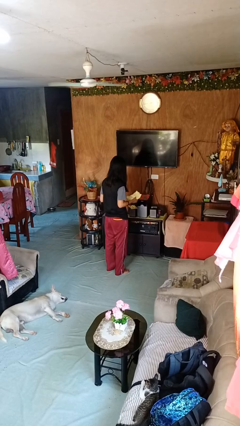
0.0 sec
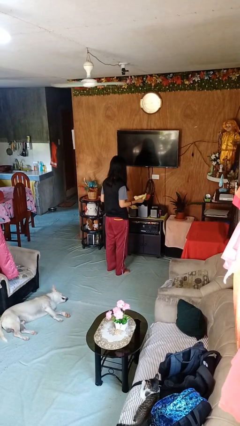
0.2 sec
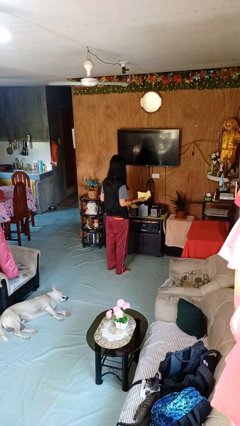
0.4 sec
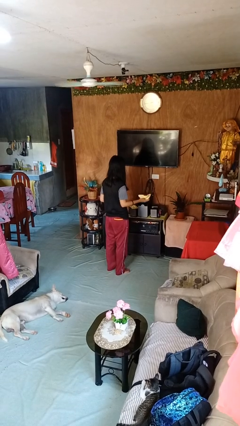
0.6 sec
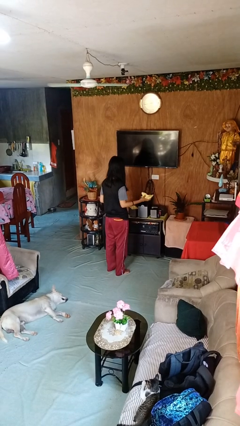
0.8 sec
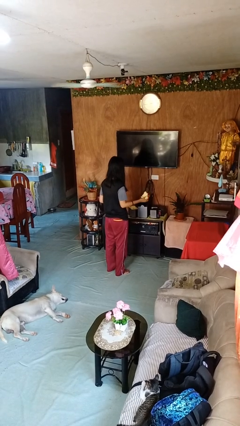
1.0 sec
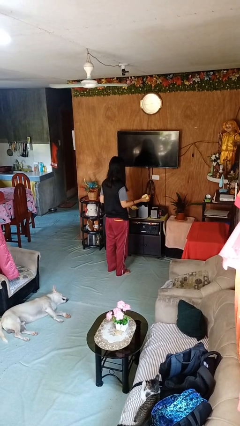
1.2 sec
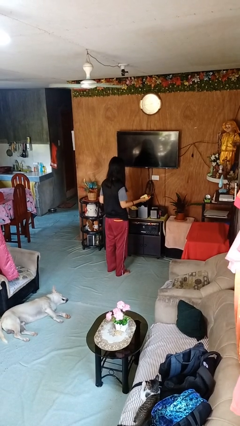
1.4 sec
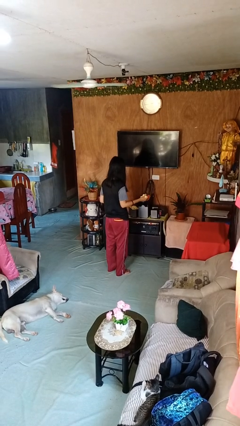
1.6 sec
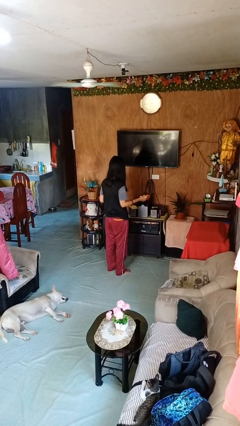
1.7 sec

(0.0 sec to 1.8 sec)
person crumples paper

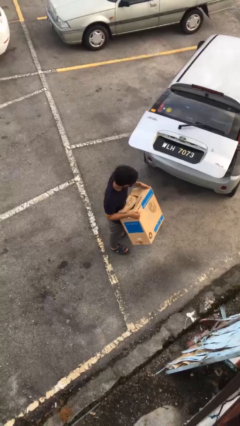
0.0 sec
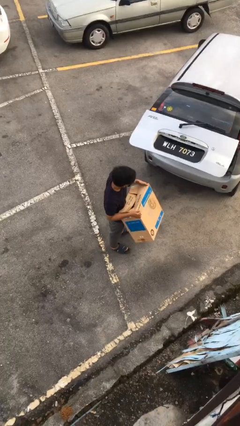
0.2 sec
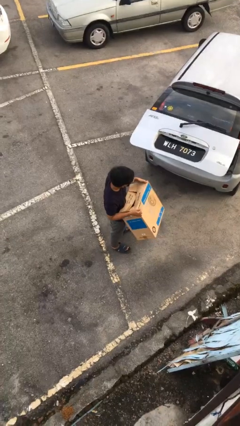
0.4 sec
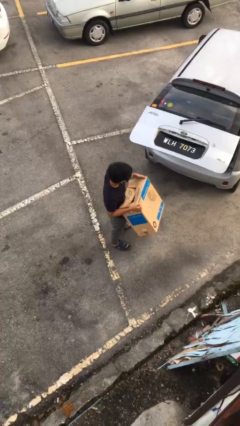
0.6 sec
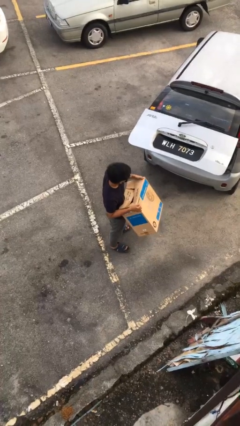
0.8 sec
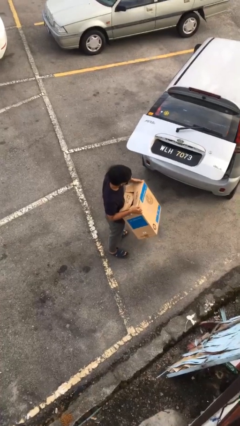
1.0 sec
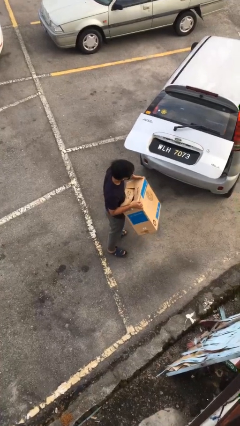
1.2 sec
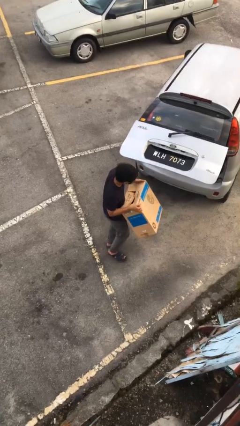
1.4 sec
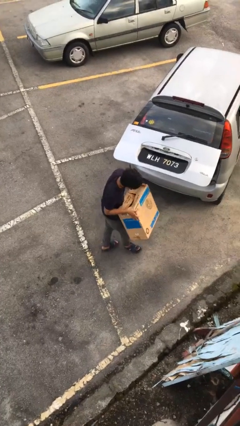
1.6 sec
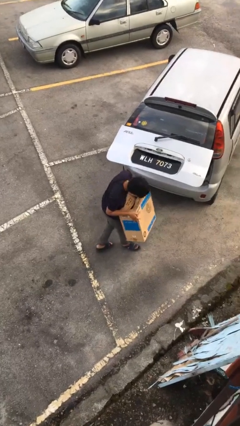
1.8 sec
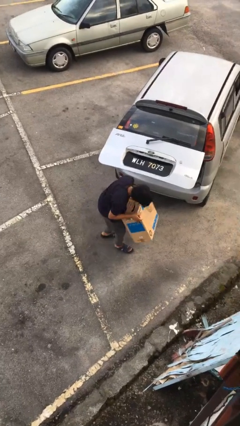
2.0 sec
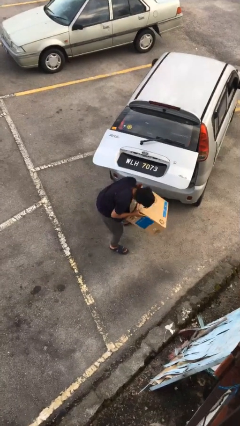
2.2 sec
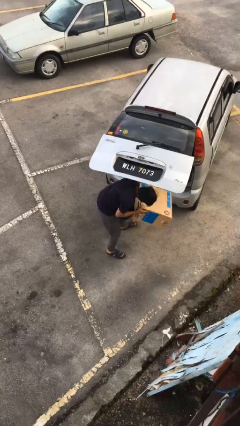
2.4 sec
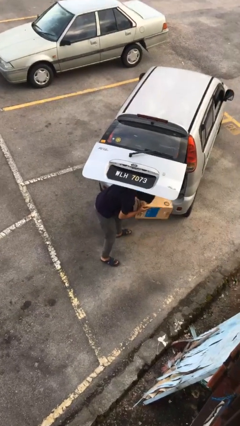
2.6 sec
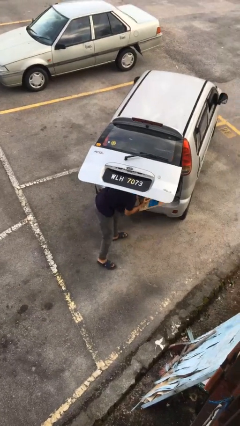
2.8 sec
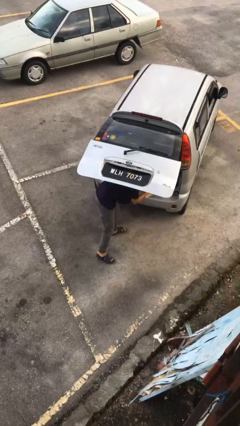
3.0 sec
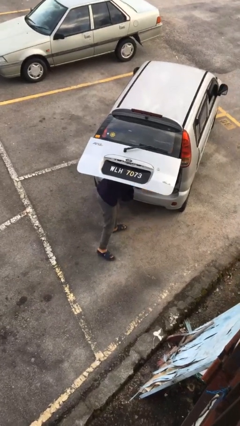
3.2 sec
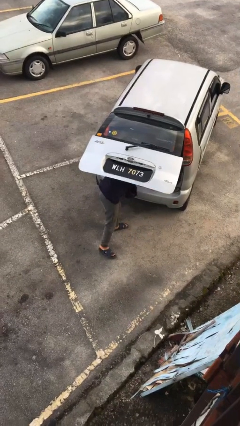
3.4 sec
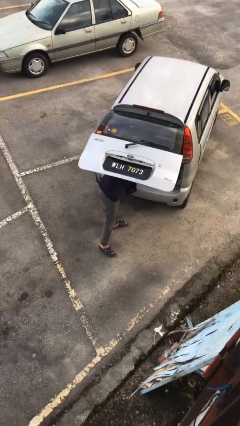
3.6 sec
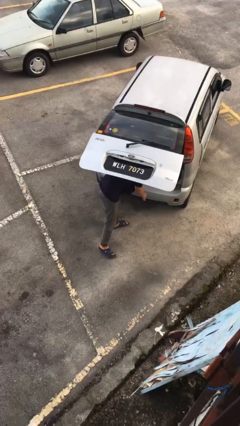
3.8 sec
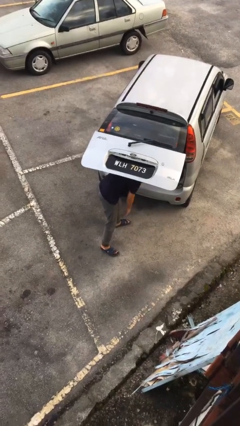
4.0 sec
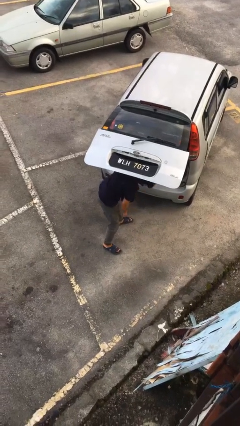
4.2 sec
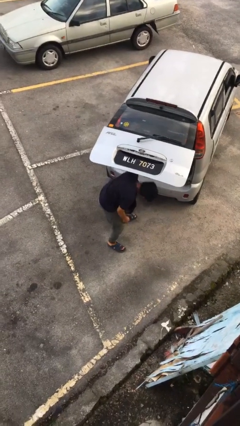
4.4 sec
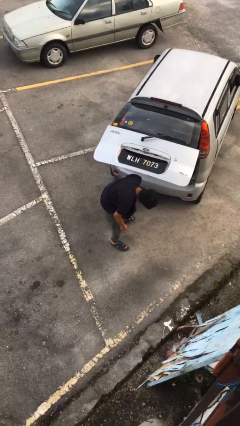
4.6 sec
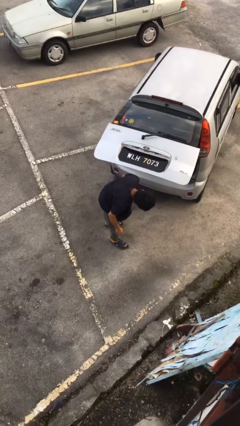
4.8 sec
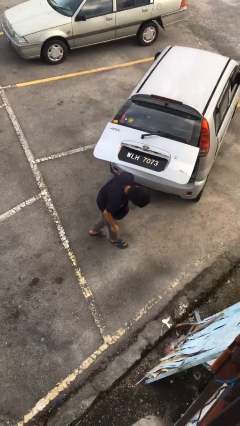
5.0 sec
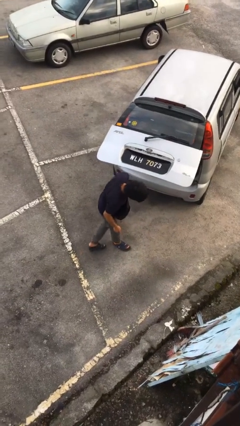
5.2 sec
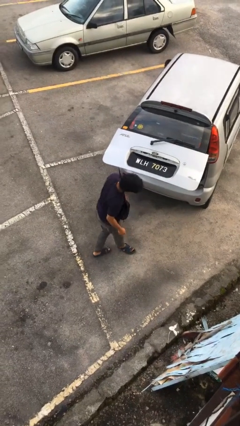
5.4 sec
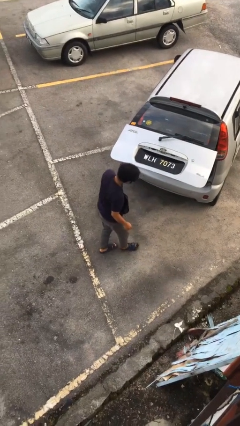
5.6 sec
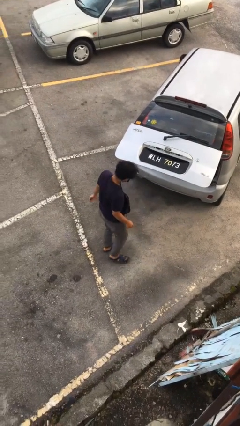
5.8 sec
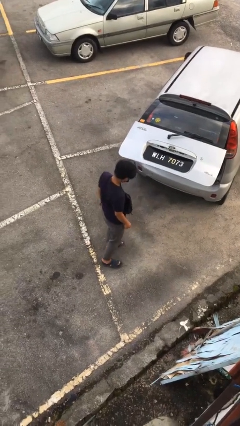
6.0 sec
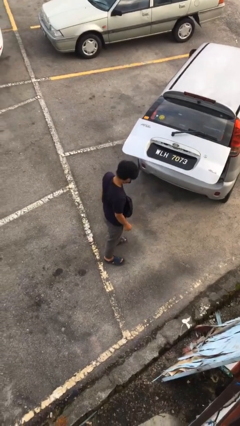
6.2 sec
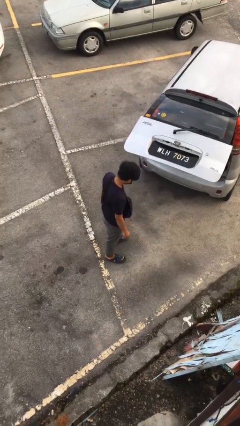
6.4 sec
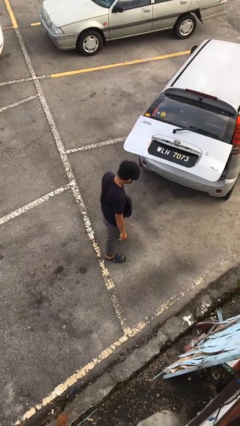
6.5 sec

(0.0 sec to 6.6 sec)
person loads car

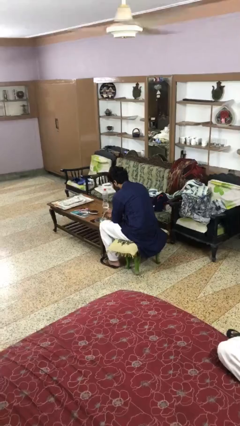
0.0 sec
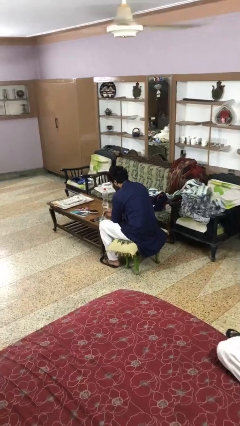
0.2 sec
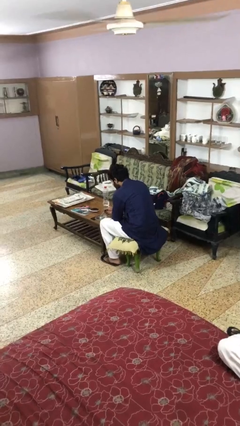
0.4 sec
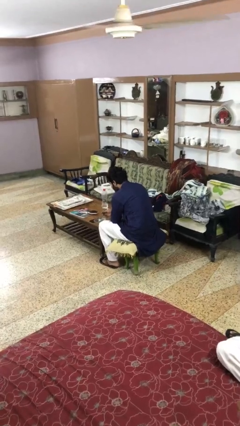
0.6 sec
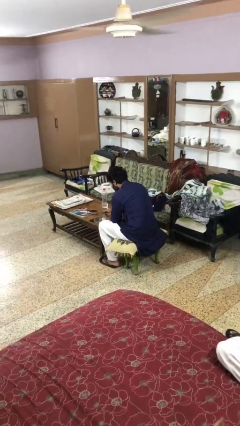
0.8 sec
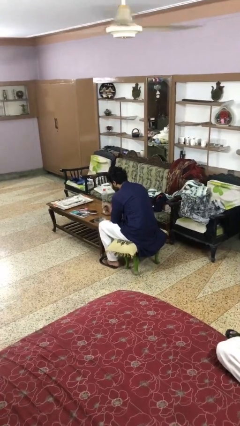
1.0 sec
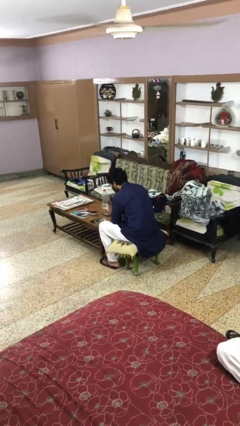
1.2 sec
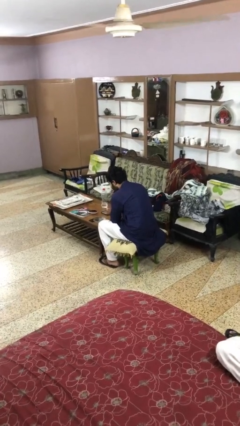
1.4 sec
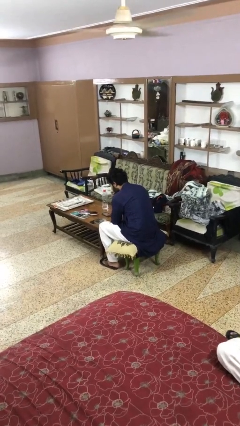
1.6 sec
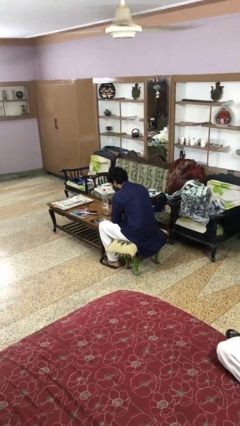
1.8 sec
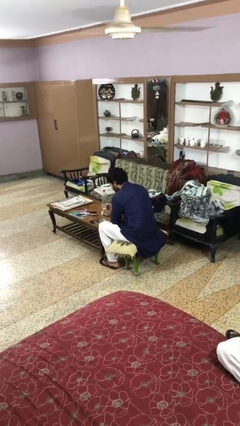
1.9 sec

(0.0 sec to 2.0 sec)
person eats with utensil

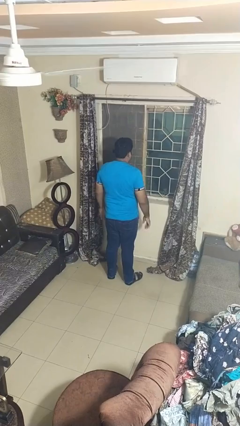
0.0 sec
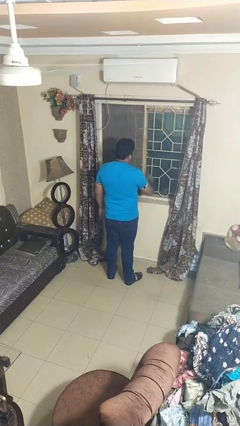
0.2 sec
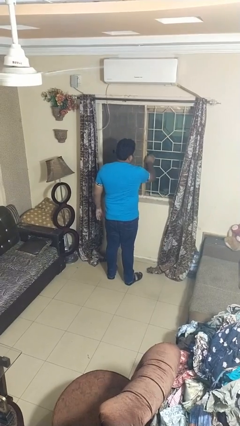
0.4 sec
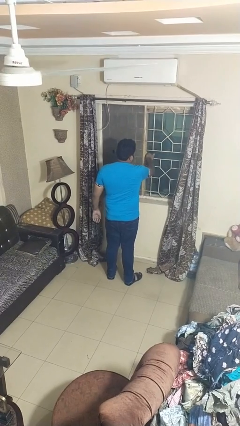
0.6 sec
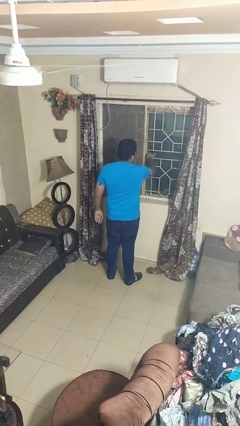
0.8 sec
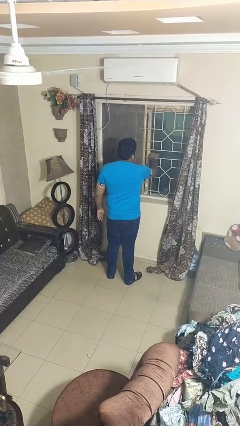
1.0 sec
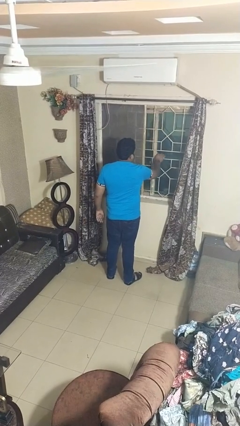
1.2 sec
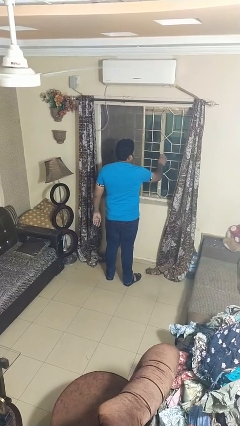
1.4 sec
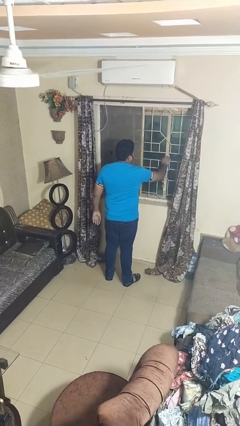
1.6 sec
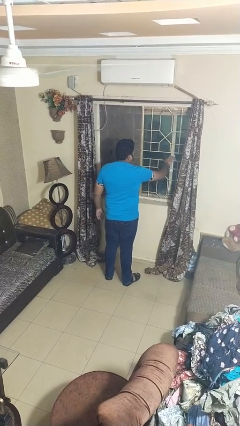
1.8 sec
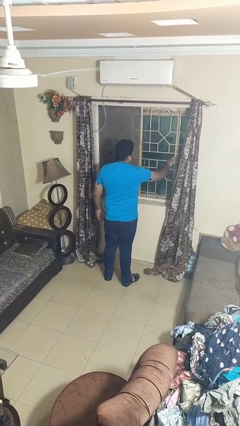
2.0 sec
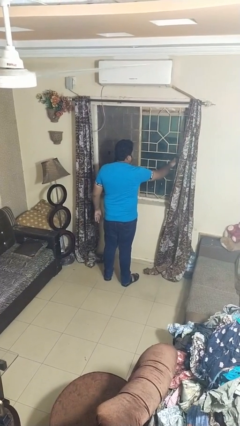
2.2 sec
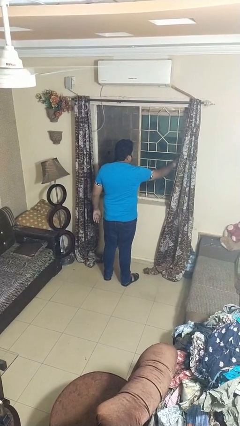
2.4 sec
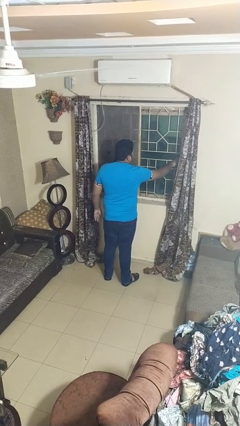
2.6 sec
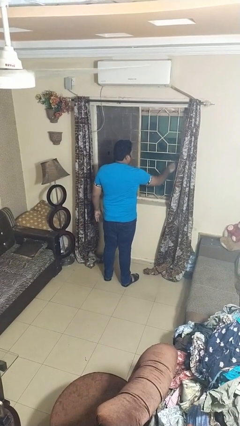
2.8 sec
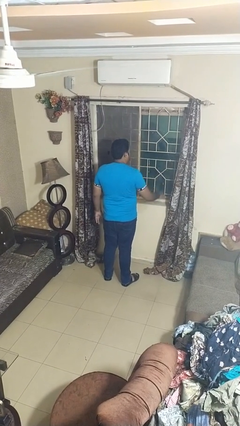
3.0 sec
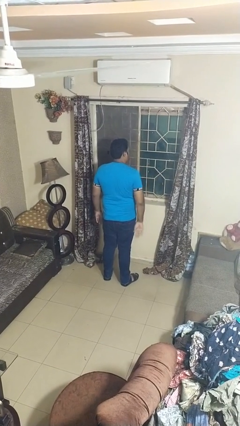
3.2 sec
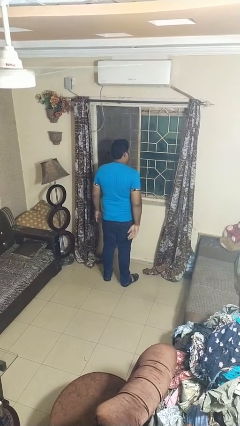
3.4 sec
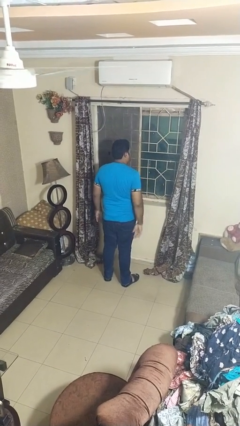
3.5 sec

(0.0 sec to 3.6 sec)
person opens home window

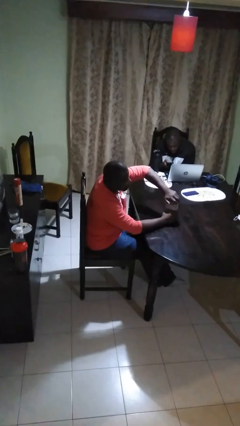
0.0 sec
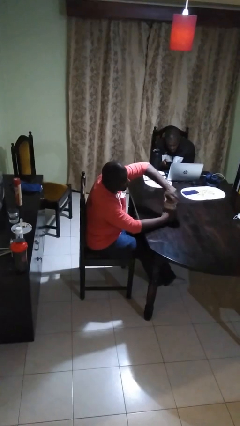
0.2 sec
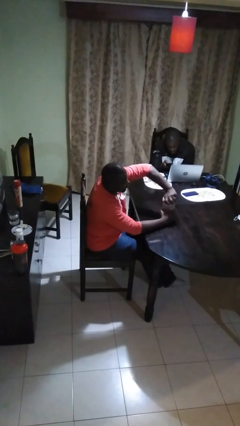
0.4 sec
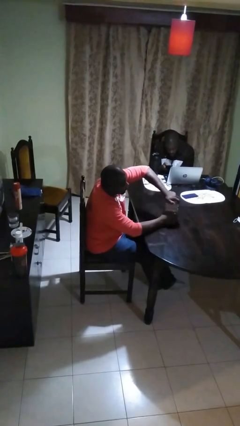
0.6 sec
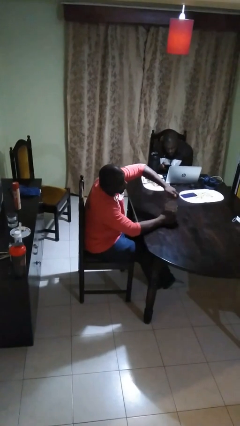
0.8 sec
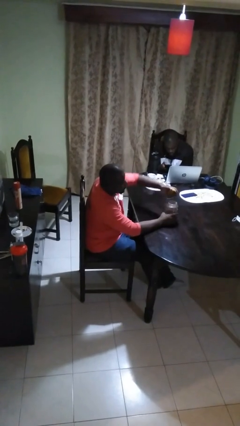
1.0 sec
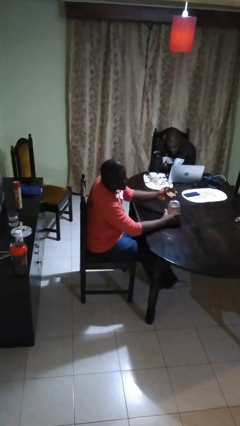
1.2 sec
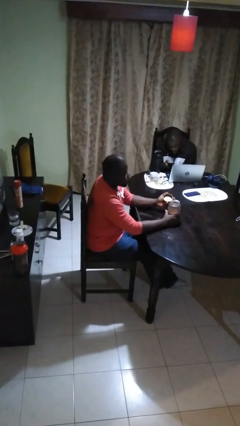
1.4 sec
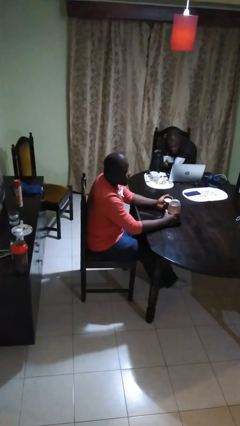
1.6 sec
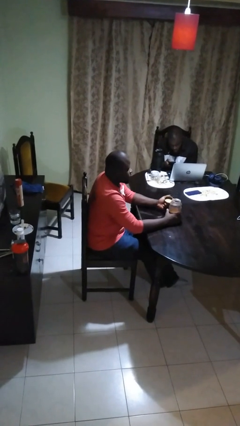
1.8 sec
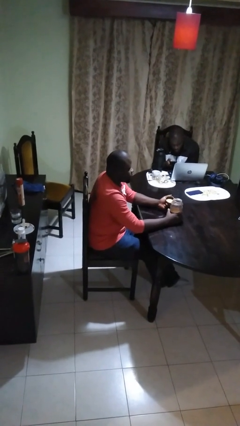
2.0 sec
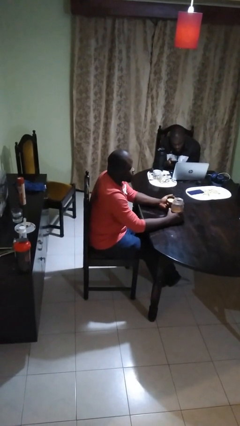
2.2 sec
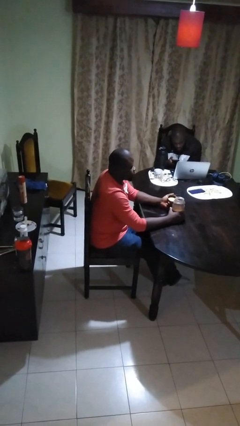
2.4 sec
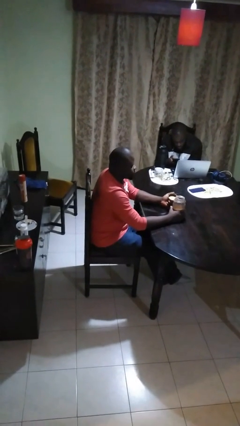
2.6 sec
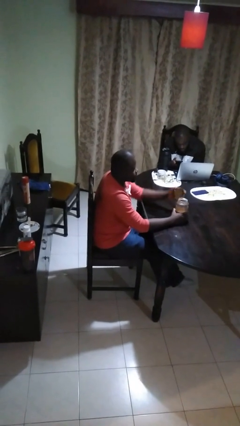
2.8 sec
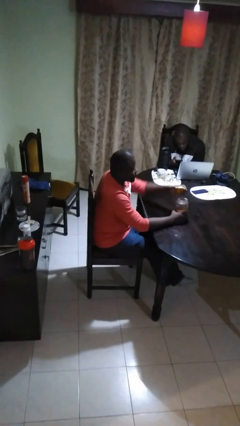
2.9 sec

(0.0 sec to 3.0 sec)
person opens jar

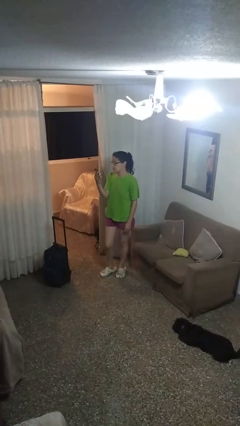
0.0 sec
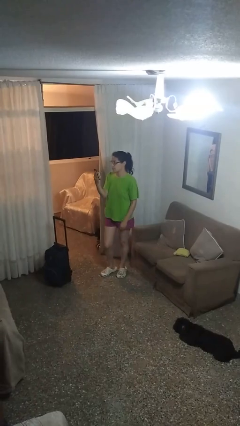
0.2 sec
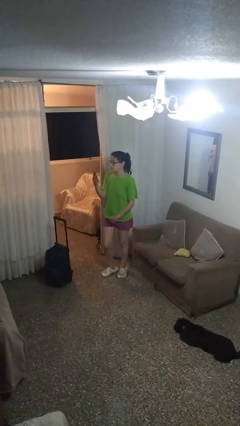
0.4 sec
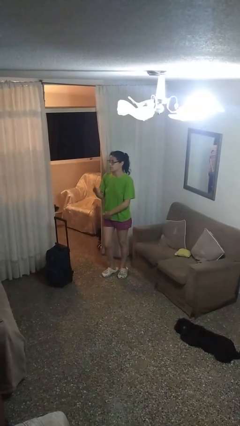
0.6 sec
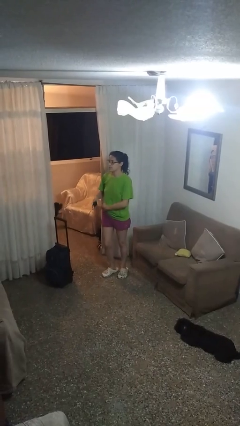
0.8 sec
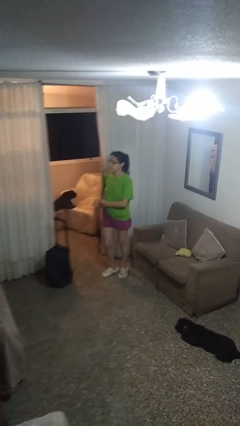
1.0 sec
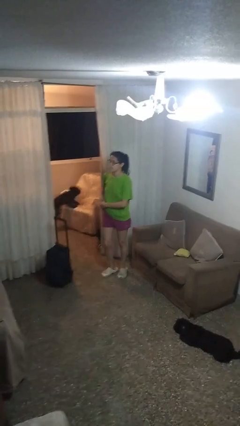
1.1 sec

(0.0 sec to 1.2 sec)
person puts phone into pocket
